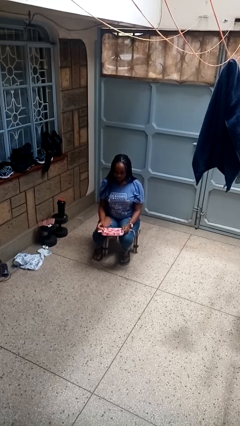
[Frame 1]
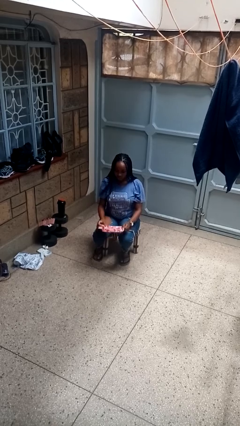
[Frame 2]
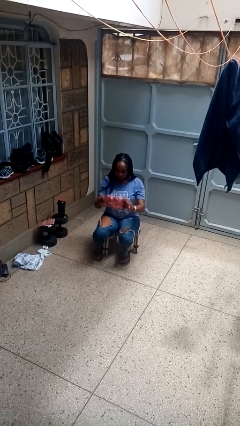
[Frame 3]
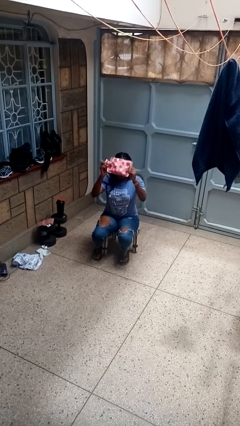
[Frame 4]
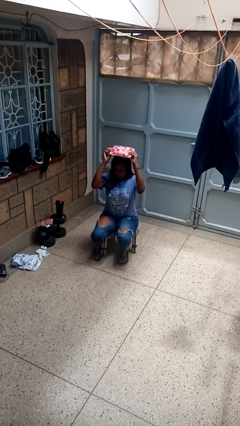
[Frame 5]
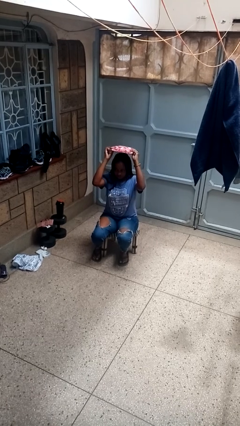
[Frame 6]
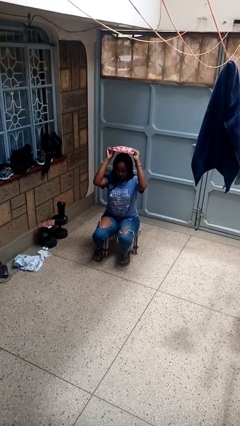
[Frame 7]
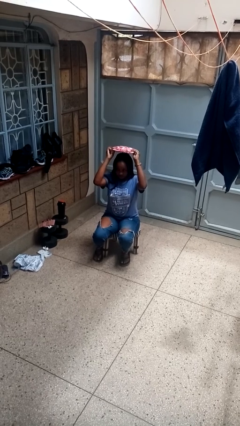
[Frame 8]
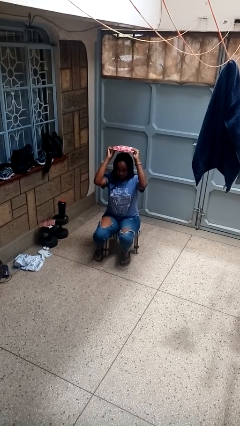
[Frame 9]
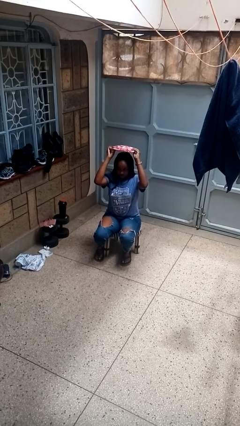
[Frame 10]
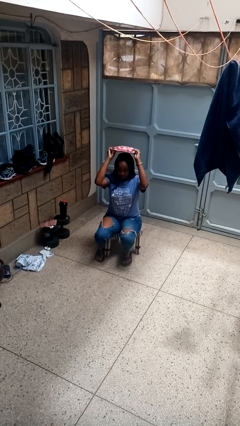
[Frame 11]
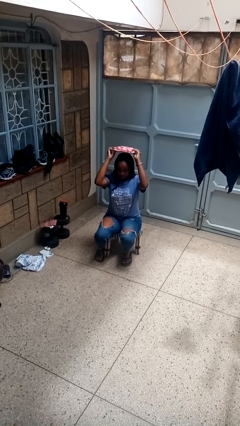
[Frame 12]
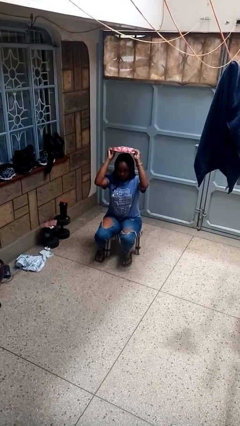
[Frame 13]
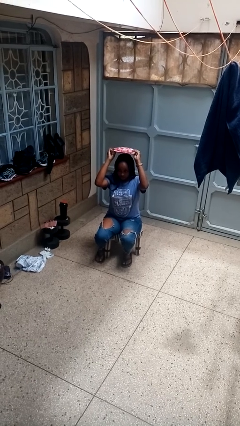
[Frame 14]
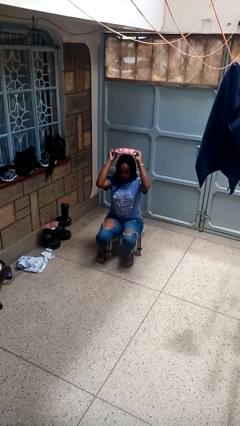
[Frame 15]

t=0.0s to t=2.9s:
person holds object above head

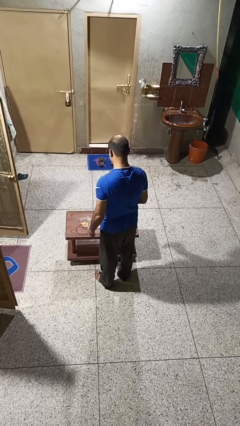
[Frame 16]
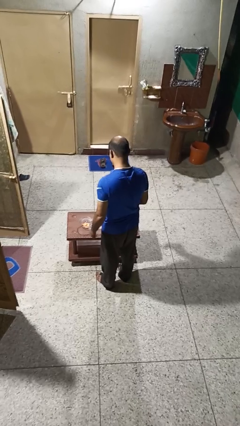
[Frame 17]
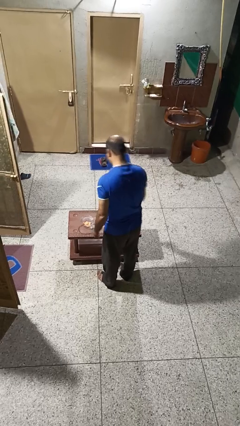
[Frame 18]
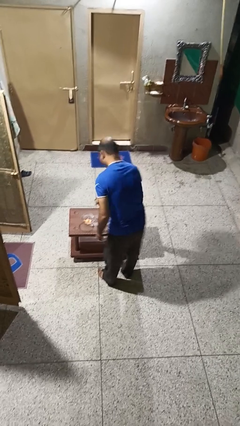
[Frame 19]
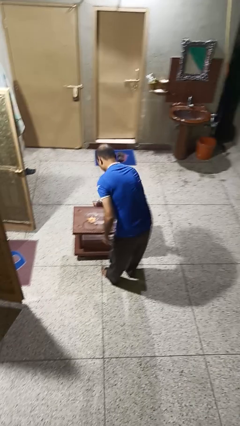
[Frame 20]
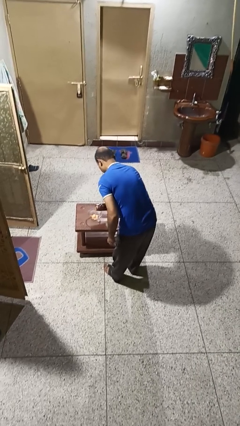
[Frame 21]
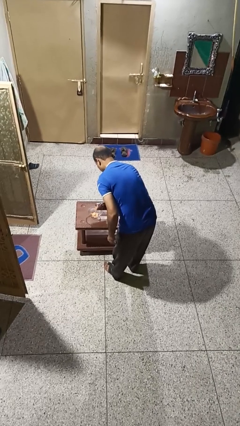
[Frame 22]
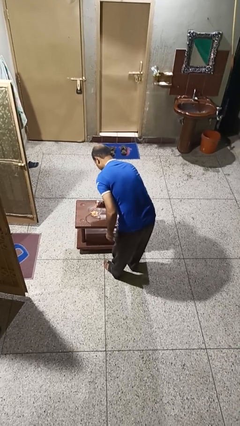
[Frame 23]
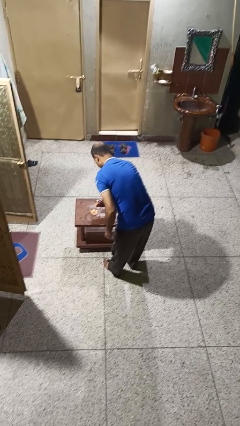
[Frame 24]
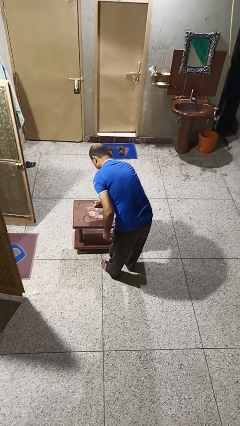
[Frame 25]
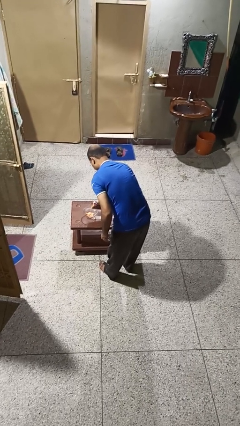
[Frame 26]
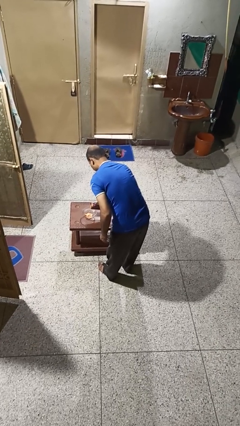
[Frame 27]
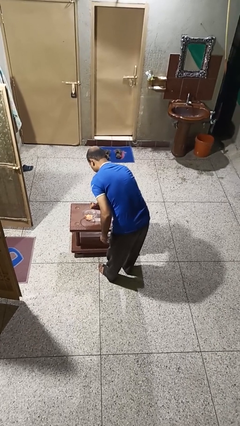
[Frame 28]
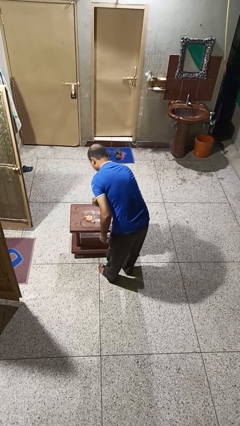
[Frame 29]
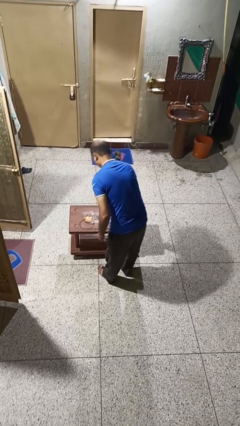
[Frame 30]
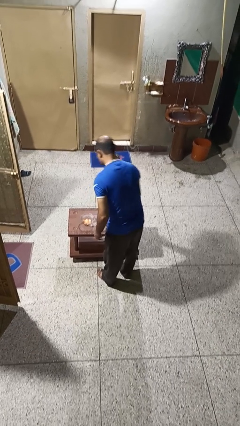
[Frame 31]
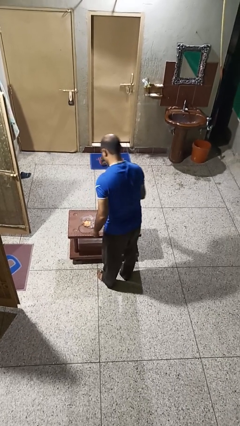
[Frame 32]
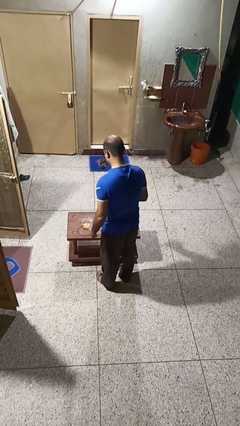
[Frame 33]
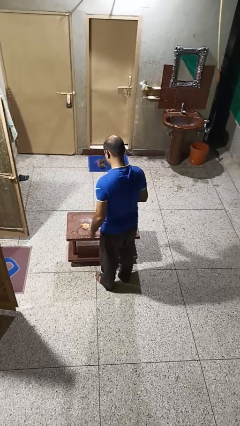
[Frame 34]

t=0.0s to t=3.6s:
person pours into bowl

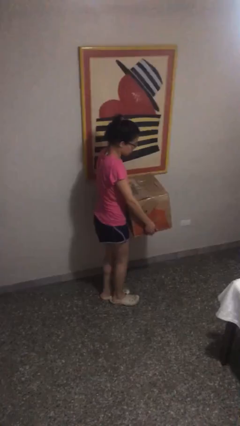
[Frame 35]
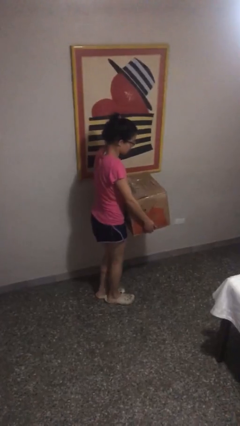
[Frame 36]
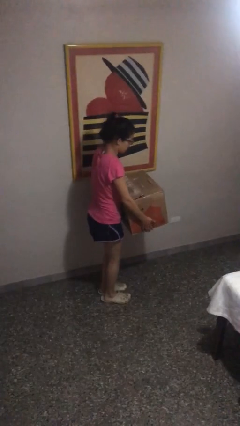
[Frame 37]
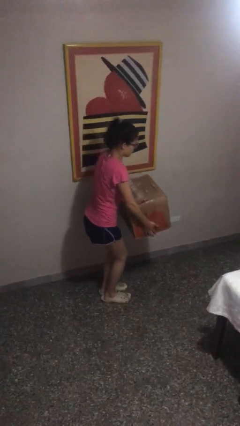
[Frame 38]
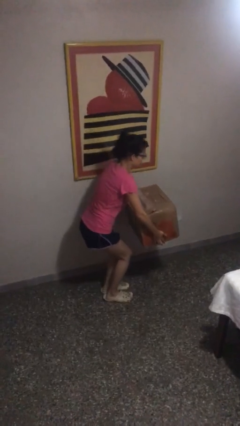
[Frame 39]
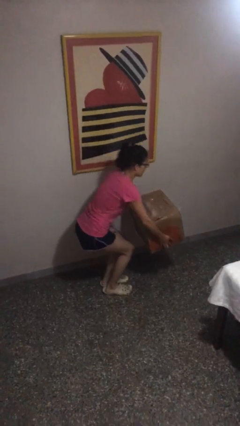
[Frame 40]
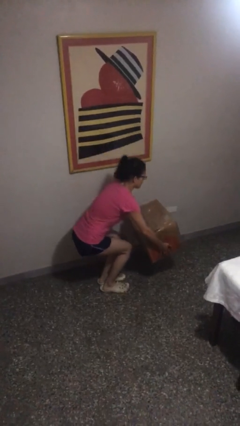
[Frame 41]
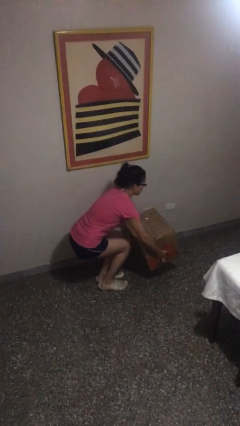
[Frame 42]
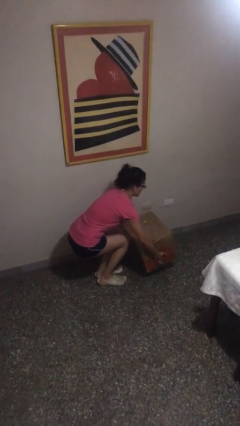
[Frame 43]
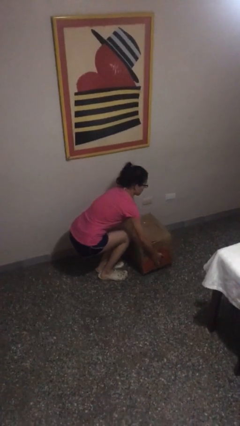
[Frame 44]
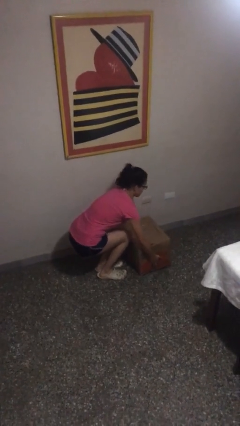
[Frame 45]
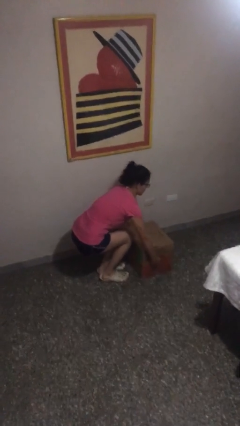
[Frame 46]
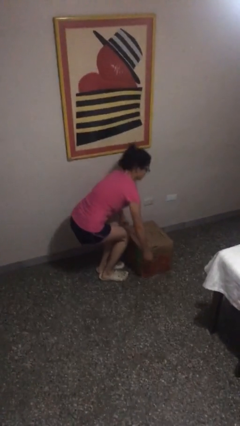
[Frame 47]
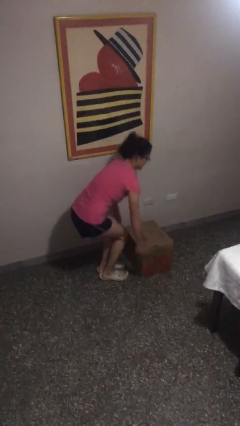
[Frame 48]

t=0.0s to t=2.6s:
person puts down object on floor

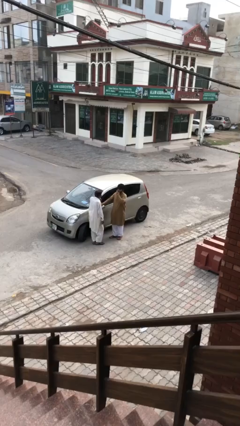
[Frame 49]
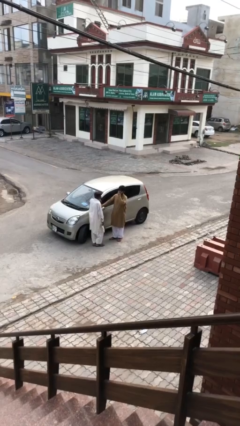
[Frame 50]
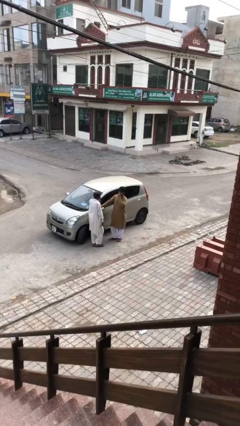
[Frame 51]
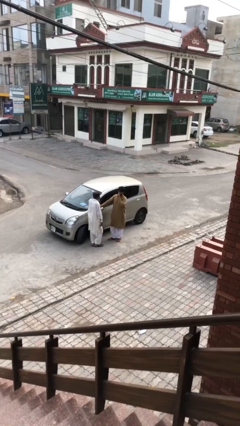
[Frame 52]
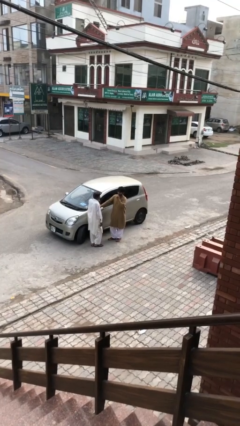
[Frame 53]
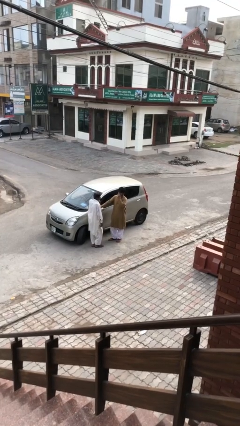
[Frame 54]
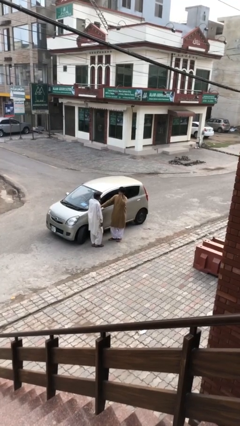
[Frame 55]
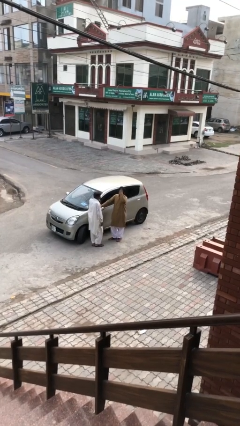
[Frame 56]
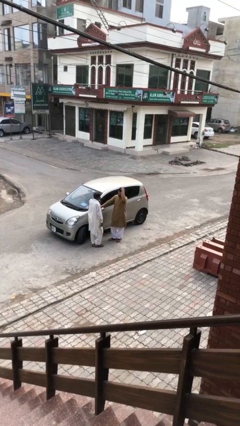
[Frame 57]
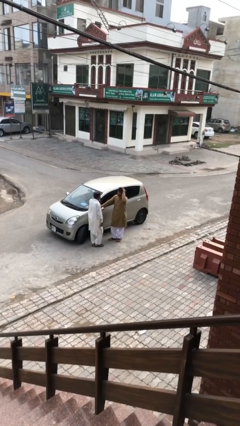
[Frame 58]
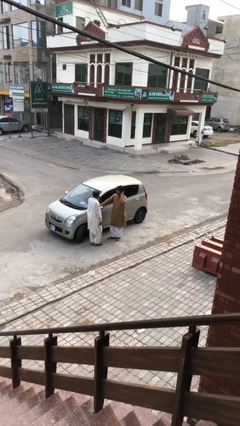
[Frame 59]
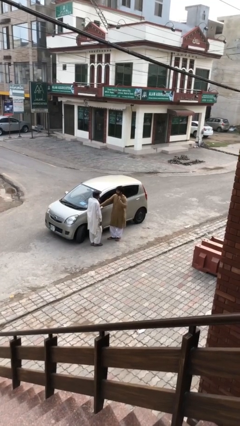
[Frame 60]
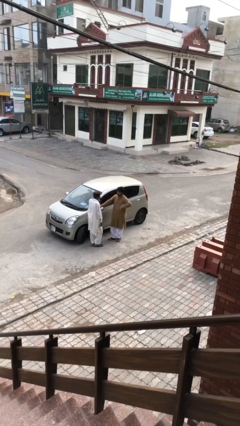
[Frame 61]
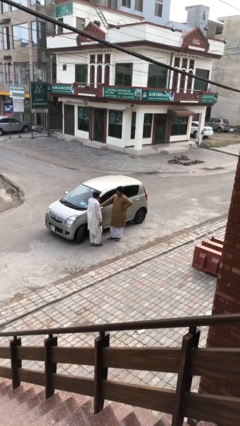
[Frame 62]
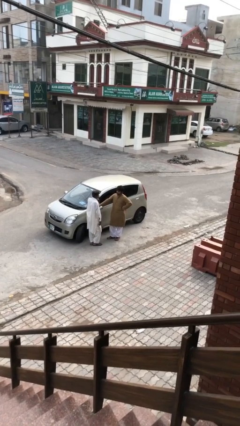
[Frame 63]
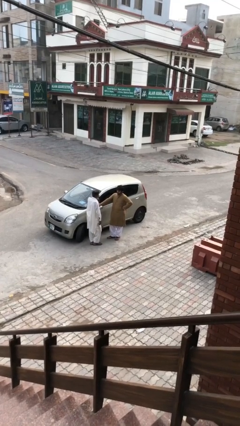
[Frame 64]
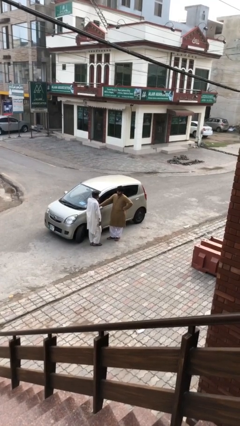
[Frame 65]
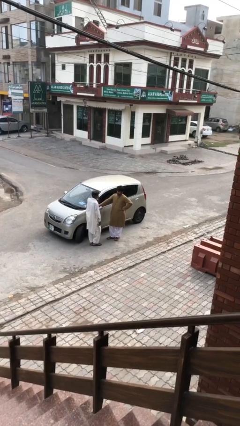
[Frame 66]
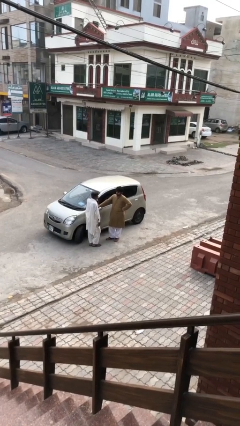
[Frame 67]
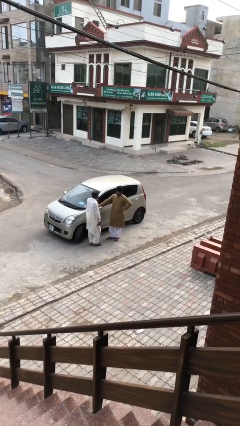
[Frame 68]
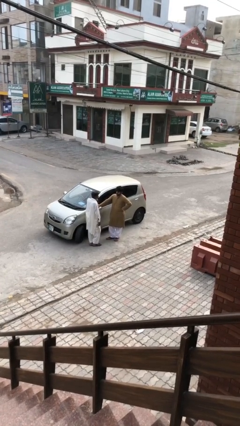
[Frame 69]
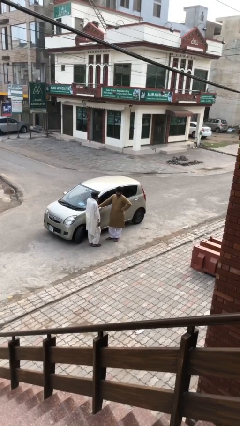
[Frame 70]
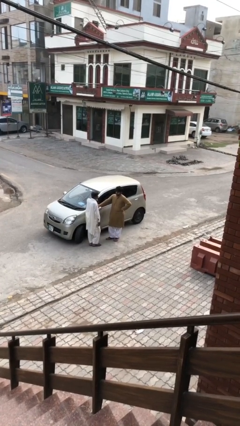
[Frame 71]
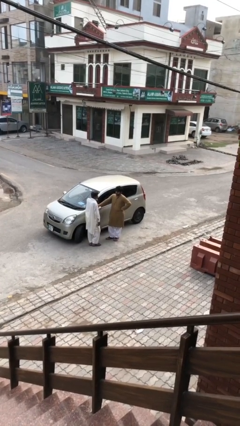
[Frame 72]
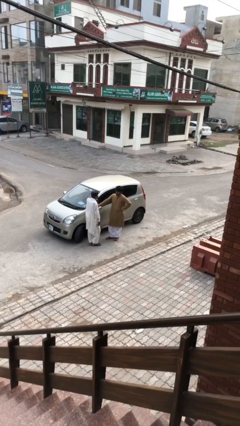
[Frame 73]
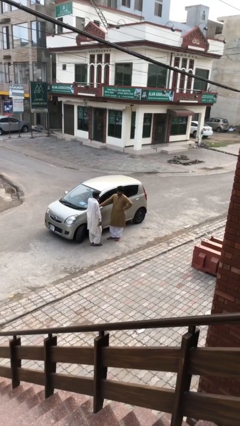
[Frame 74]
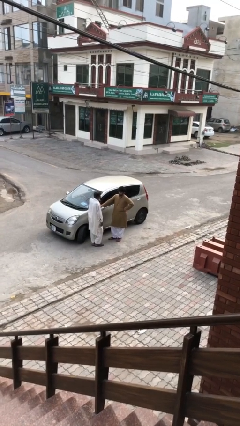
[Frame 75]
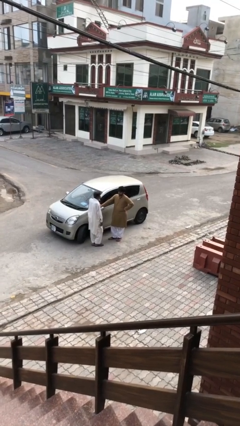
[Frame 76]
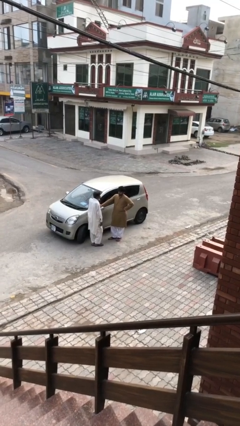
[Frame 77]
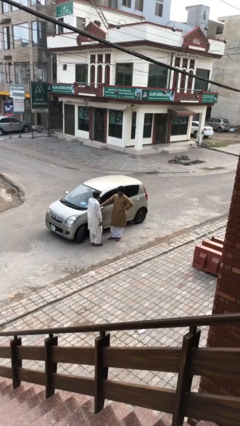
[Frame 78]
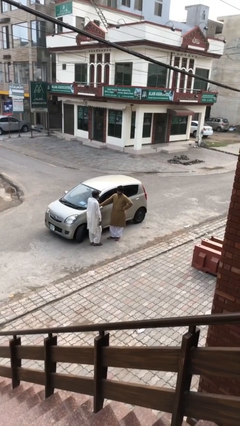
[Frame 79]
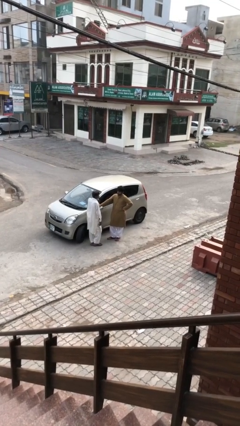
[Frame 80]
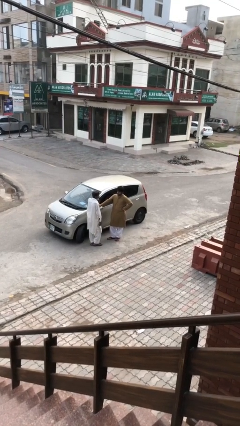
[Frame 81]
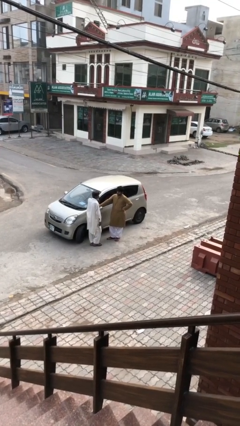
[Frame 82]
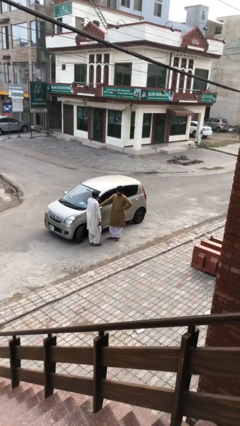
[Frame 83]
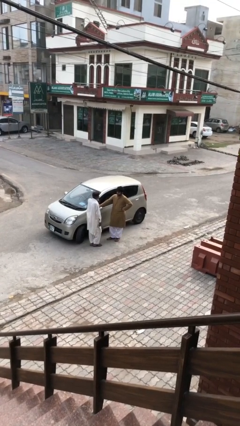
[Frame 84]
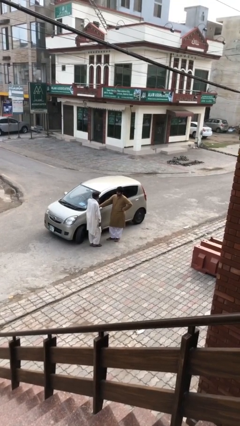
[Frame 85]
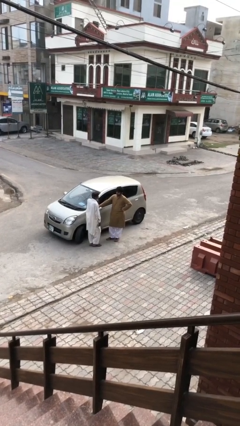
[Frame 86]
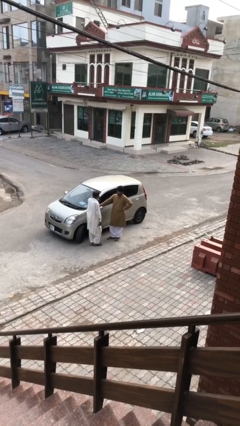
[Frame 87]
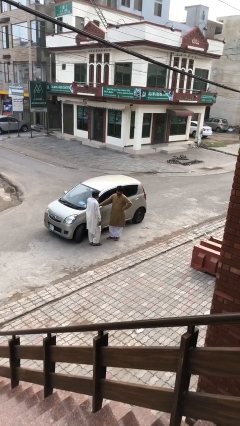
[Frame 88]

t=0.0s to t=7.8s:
person talks to person

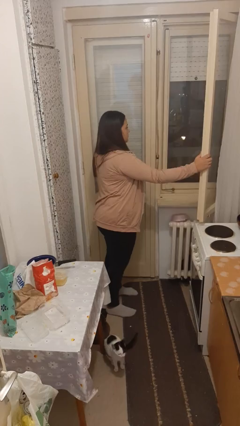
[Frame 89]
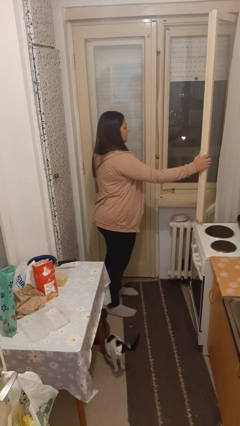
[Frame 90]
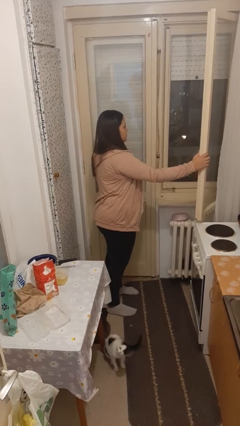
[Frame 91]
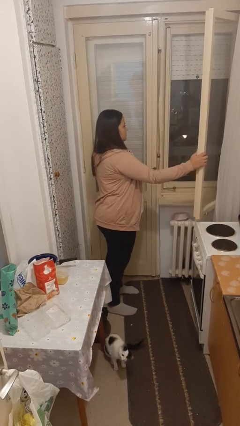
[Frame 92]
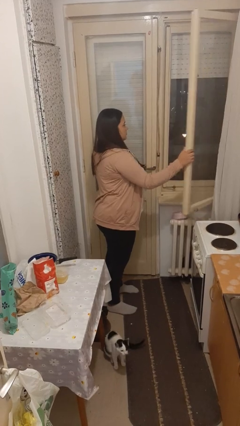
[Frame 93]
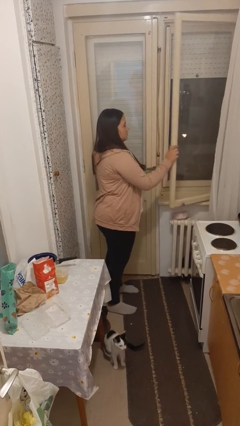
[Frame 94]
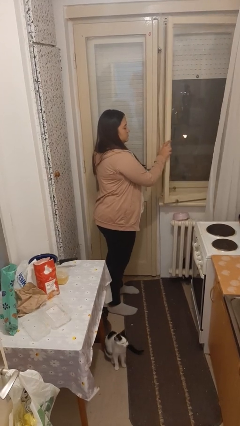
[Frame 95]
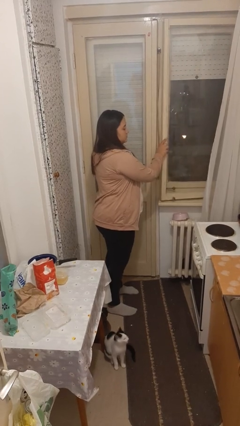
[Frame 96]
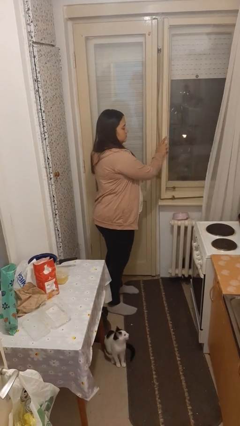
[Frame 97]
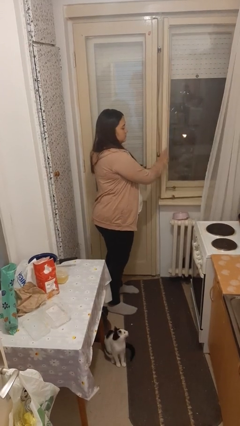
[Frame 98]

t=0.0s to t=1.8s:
person closes home window
